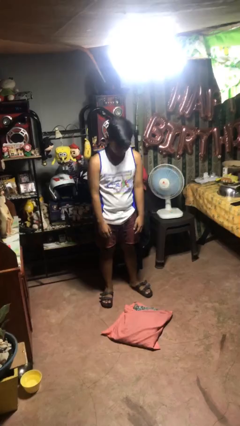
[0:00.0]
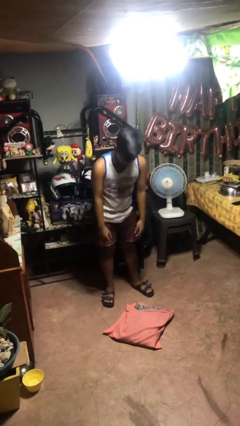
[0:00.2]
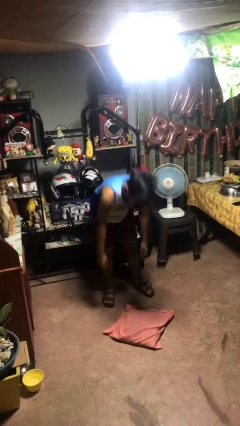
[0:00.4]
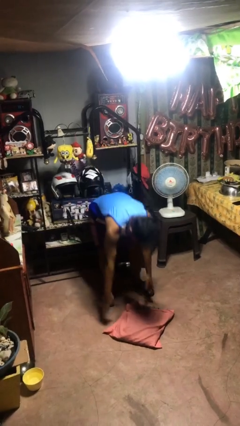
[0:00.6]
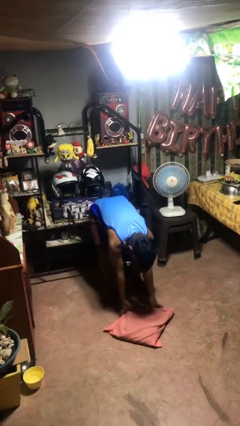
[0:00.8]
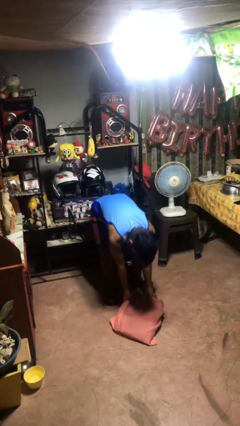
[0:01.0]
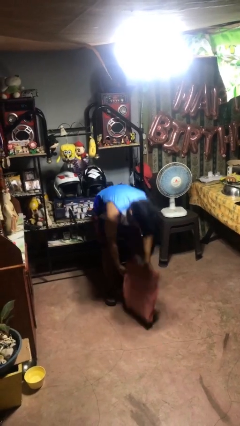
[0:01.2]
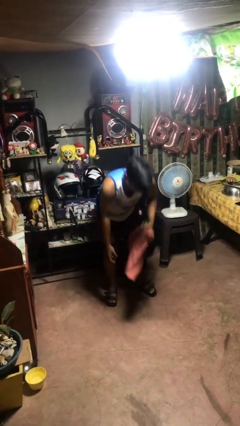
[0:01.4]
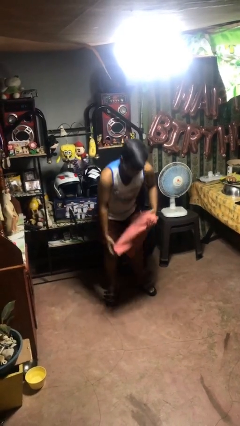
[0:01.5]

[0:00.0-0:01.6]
person picks up object from floor

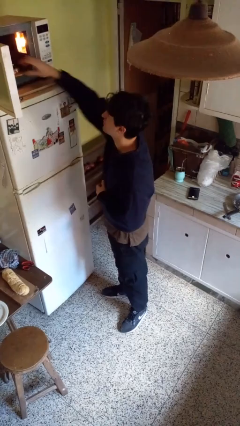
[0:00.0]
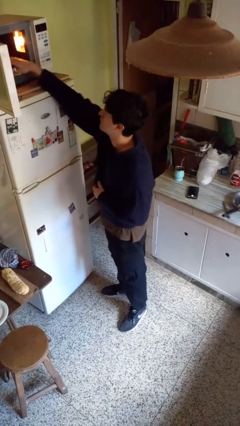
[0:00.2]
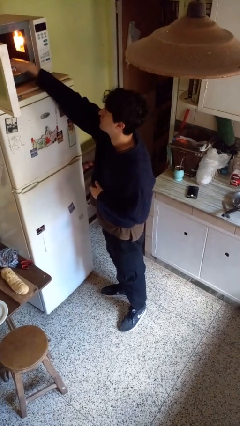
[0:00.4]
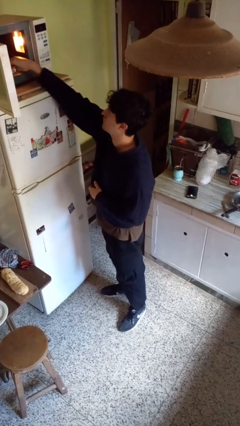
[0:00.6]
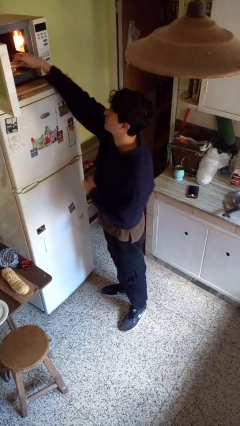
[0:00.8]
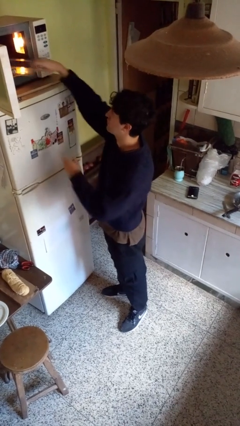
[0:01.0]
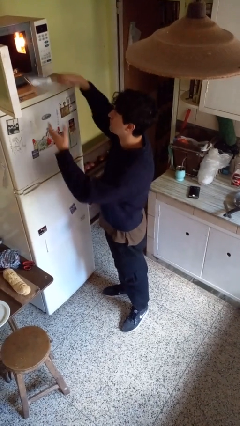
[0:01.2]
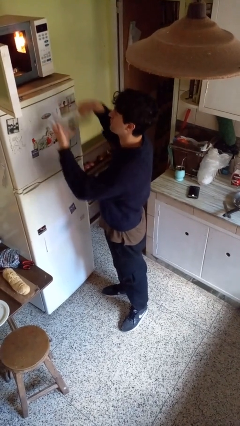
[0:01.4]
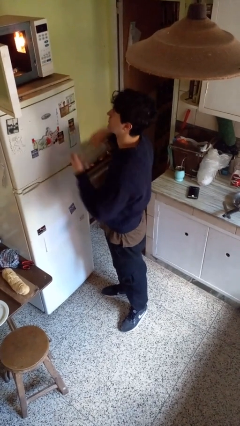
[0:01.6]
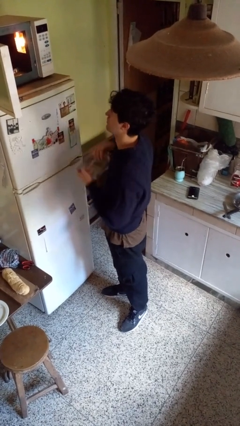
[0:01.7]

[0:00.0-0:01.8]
person takes object from microwave

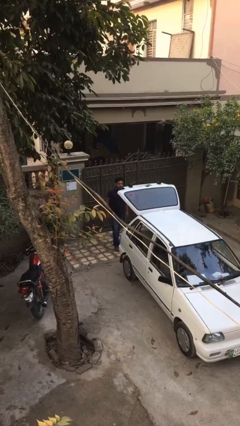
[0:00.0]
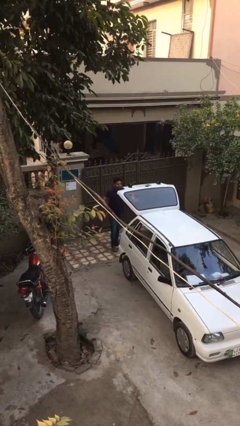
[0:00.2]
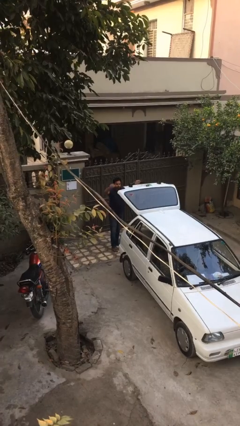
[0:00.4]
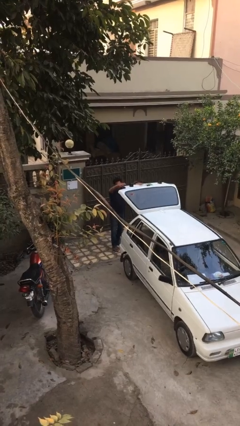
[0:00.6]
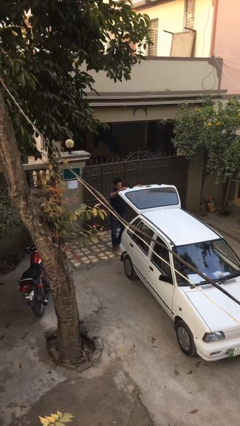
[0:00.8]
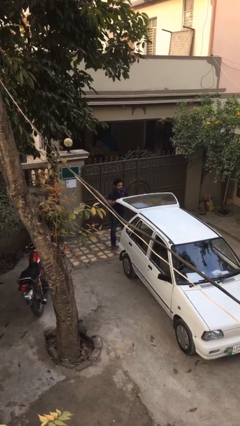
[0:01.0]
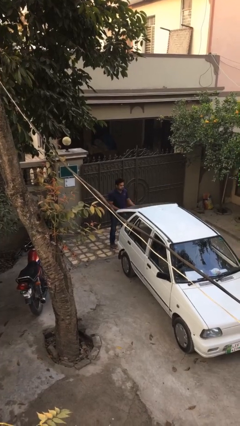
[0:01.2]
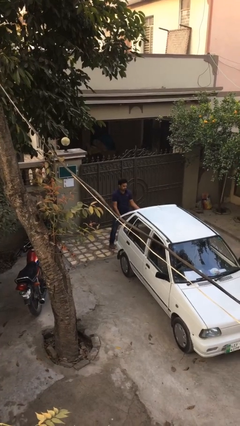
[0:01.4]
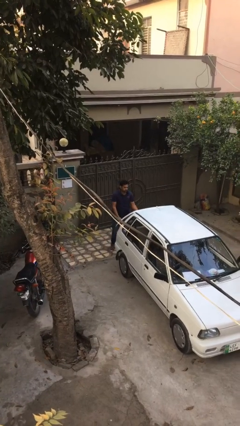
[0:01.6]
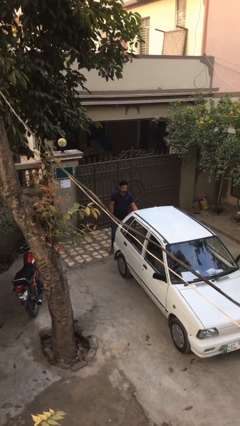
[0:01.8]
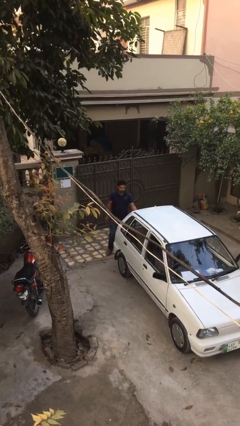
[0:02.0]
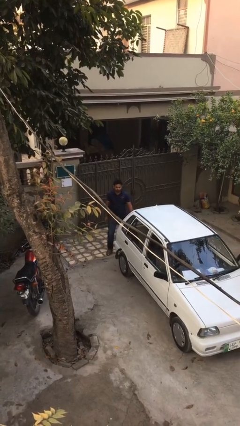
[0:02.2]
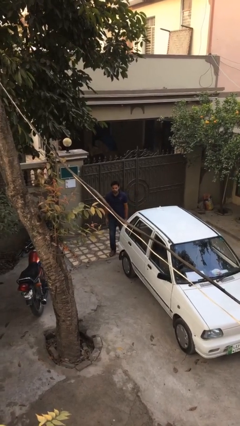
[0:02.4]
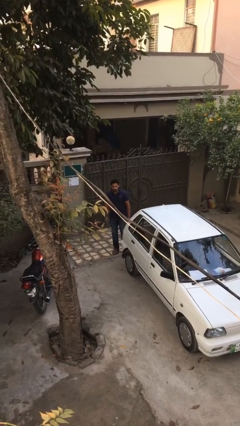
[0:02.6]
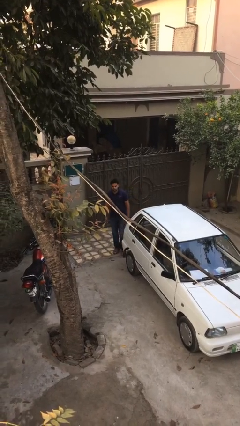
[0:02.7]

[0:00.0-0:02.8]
person closes car trunk

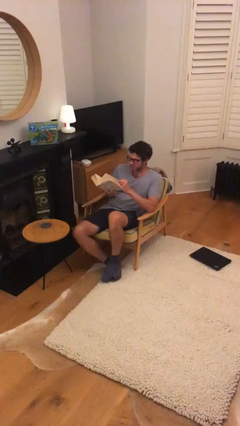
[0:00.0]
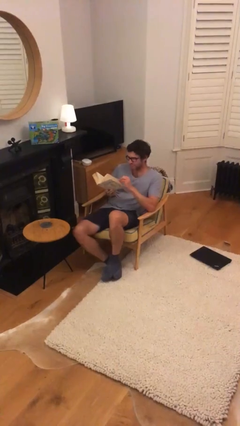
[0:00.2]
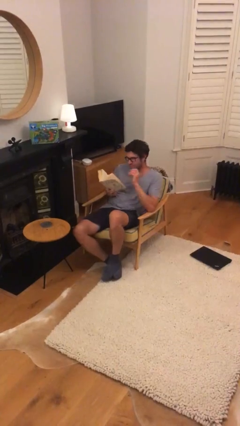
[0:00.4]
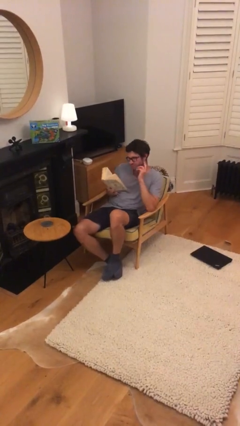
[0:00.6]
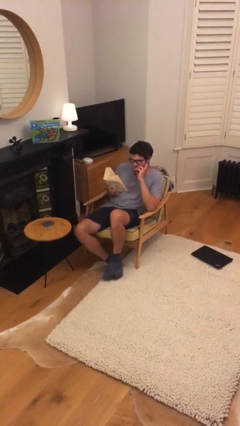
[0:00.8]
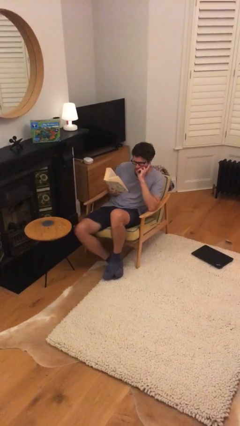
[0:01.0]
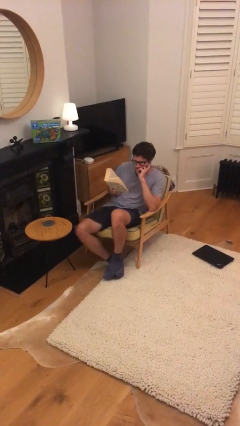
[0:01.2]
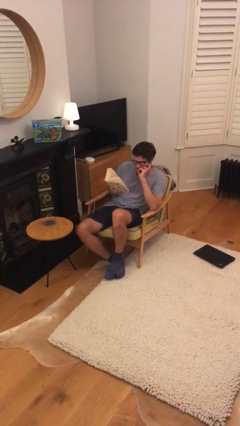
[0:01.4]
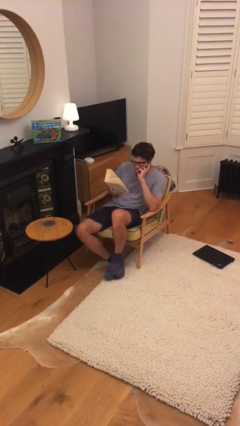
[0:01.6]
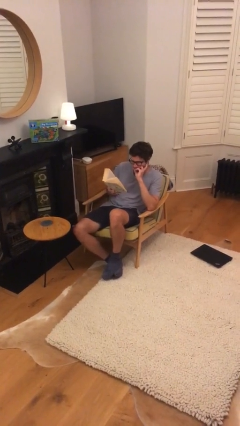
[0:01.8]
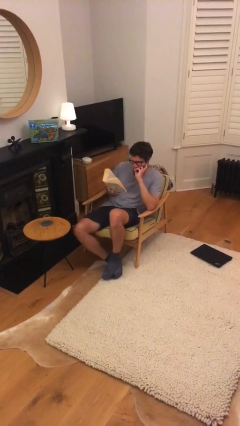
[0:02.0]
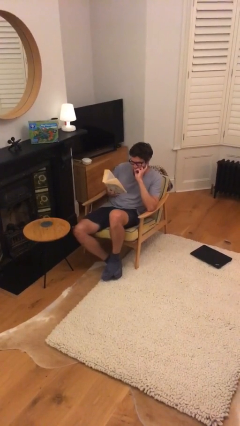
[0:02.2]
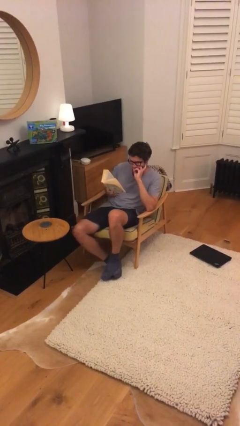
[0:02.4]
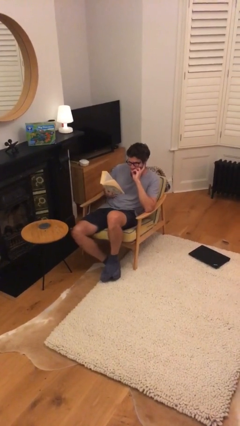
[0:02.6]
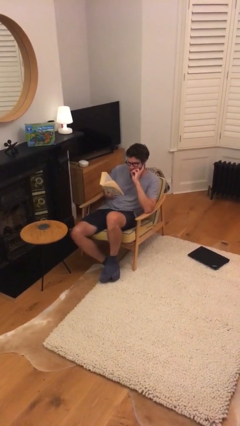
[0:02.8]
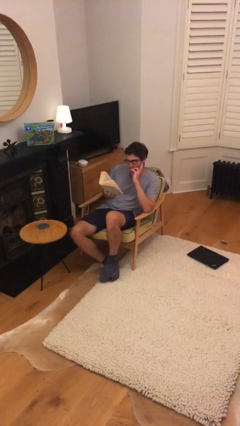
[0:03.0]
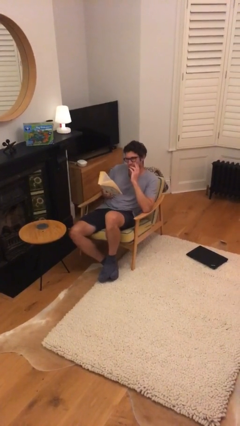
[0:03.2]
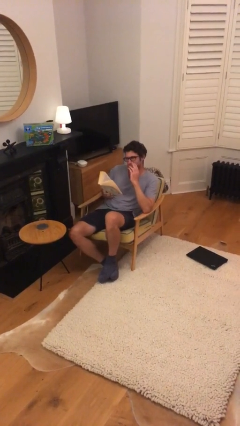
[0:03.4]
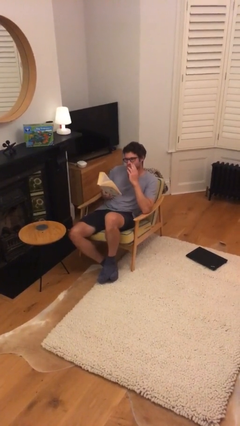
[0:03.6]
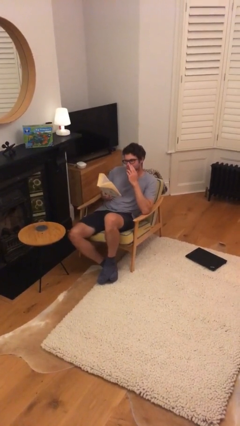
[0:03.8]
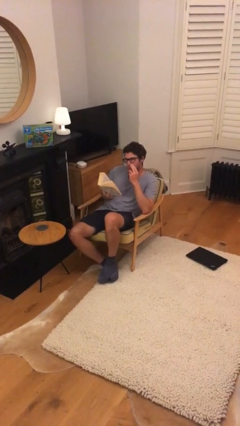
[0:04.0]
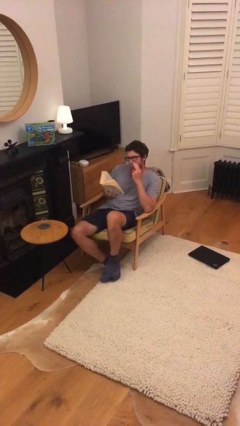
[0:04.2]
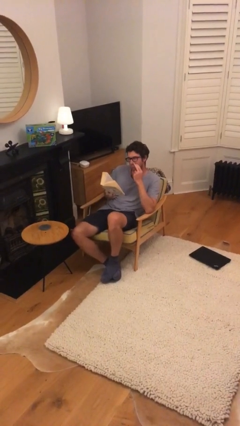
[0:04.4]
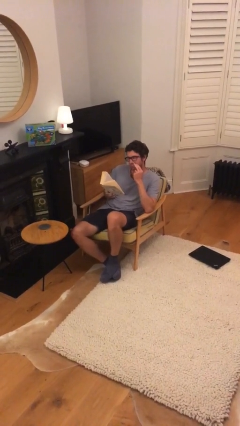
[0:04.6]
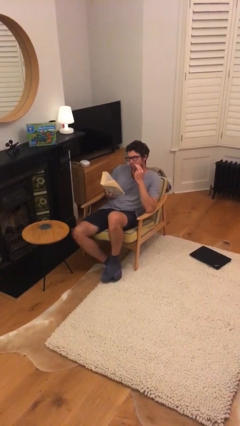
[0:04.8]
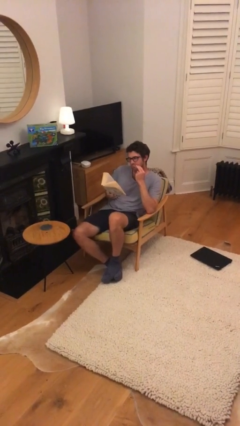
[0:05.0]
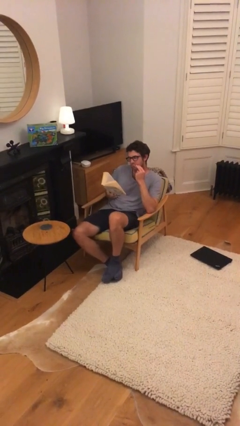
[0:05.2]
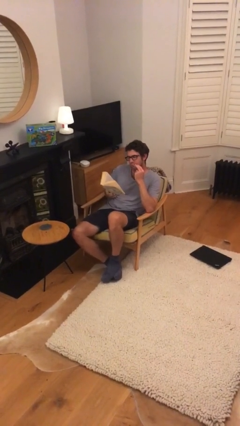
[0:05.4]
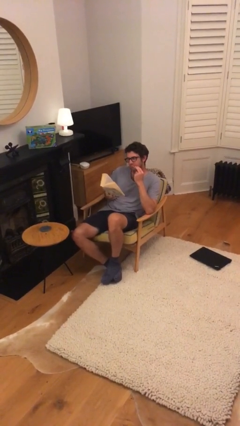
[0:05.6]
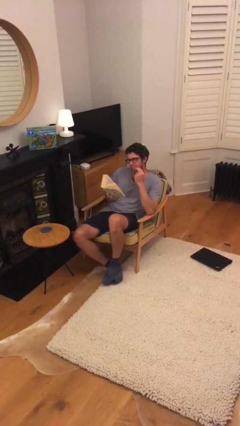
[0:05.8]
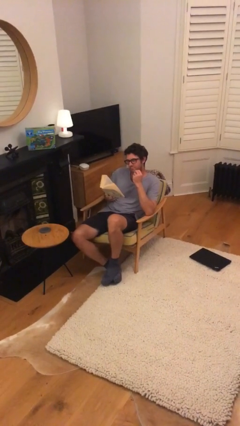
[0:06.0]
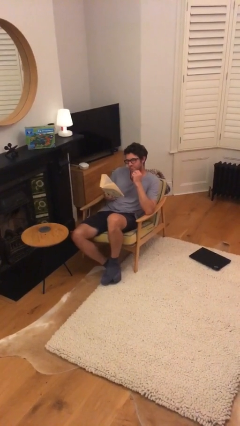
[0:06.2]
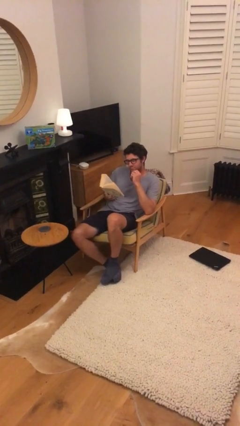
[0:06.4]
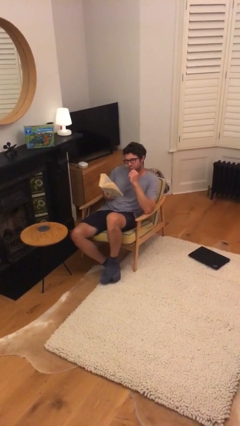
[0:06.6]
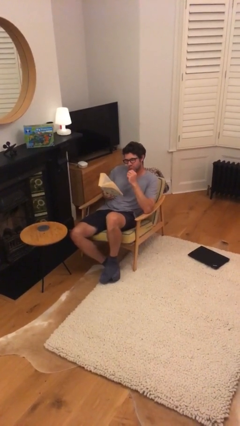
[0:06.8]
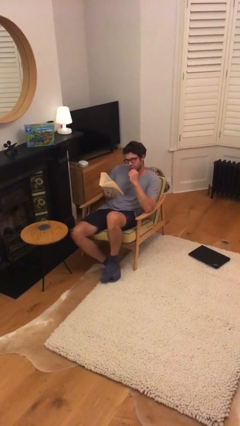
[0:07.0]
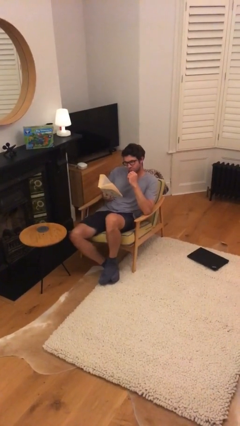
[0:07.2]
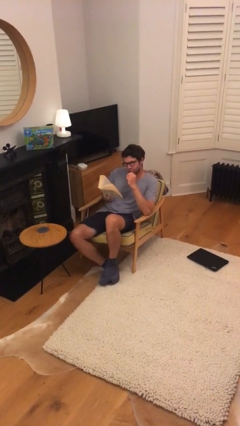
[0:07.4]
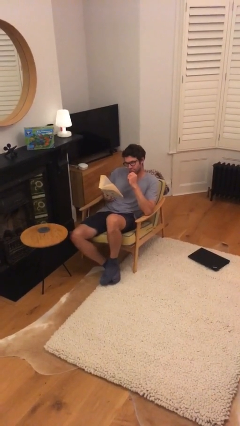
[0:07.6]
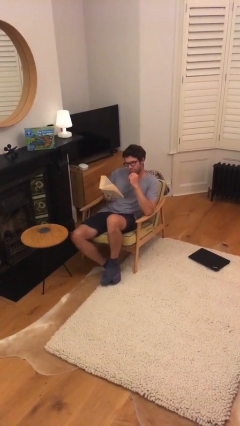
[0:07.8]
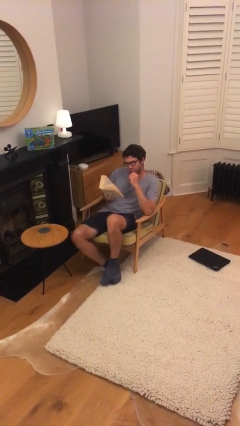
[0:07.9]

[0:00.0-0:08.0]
person reads document

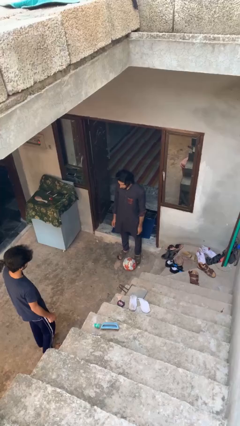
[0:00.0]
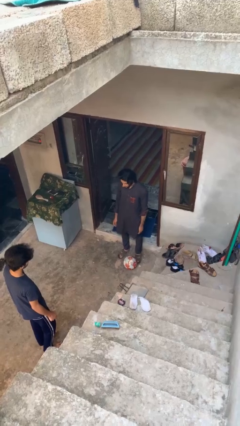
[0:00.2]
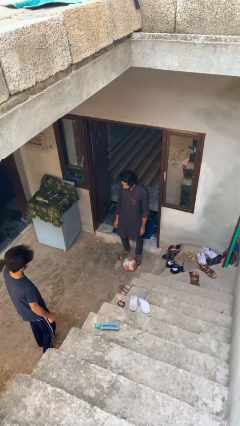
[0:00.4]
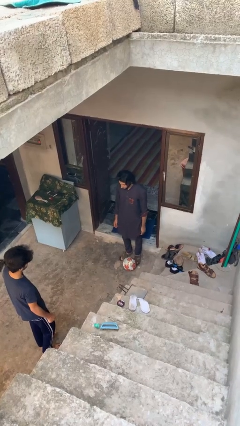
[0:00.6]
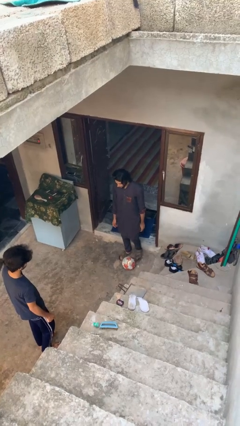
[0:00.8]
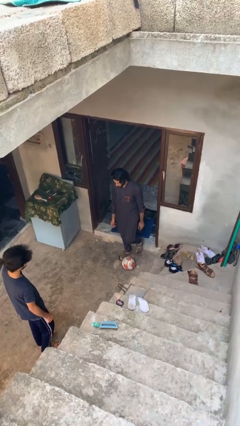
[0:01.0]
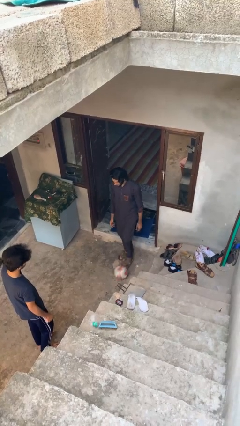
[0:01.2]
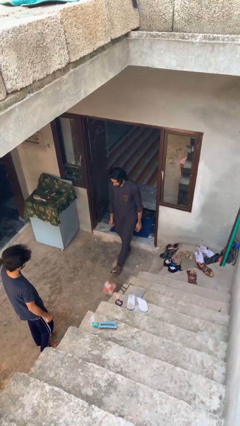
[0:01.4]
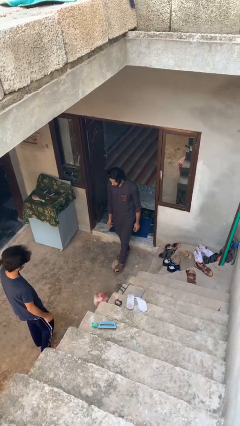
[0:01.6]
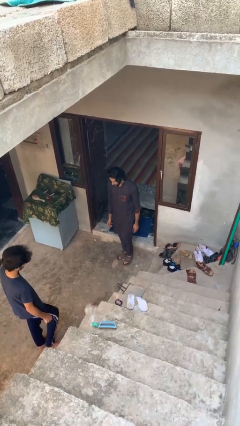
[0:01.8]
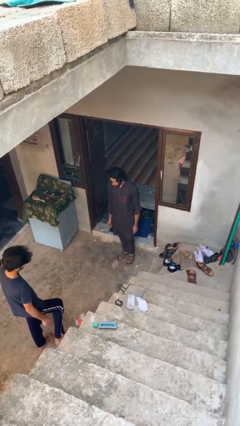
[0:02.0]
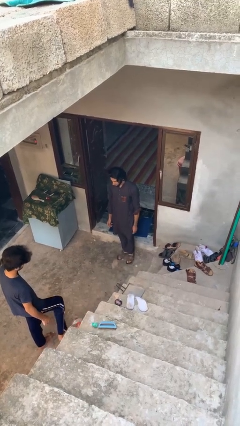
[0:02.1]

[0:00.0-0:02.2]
person kicks object to person

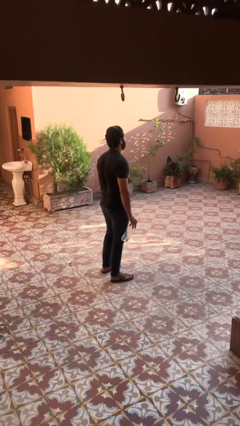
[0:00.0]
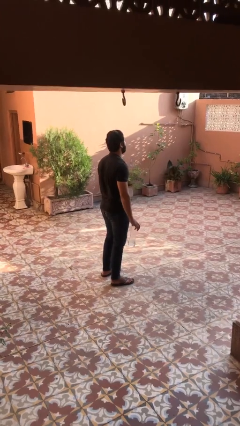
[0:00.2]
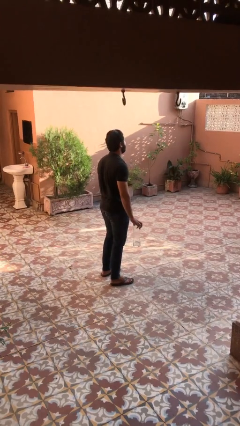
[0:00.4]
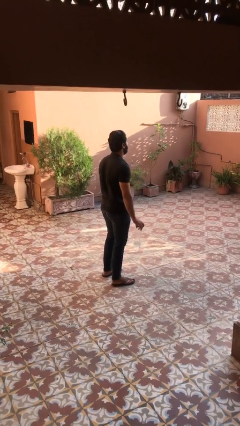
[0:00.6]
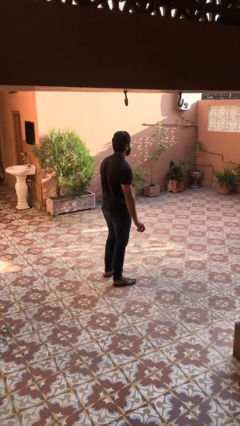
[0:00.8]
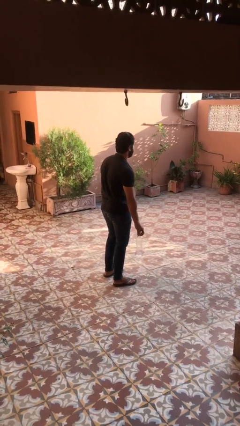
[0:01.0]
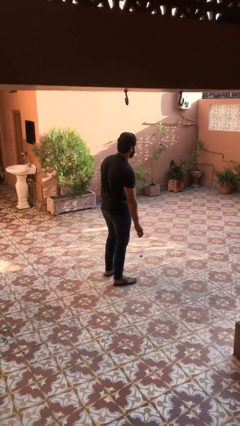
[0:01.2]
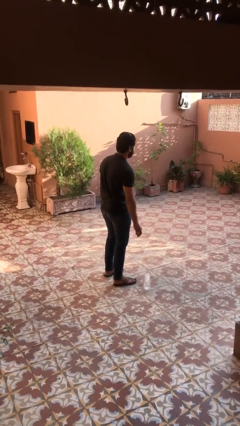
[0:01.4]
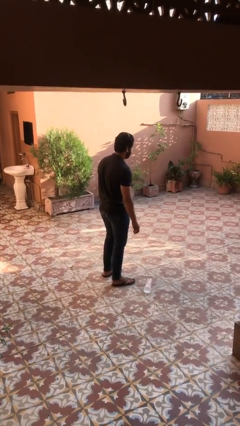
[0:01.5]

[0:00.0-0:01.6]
person throws object into air
